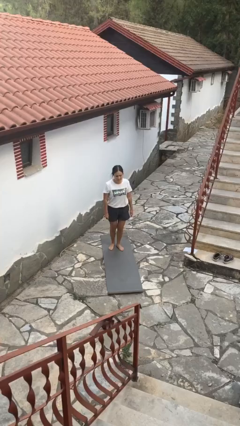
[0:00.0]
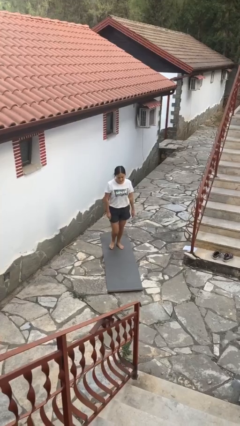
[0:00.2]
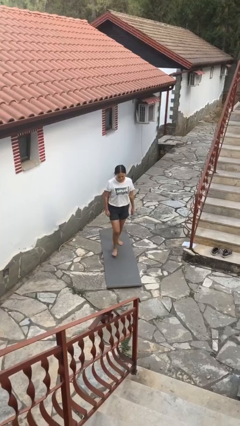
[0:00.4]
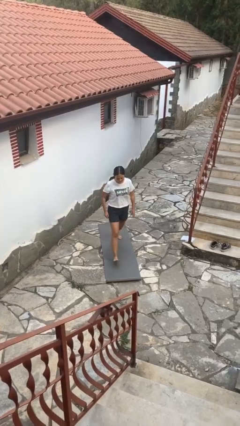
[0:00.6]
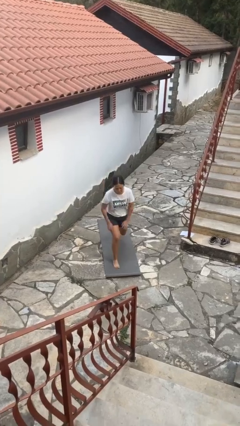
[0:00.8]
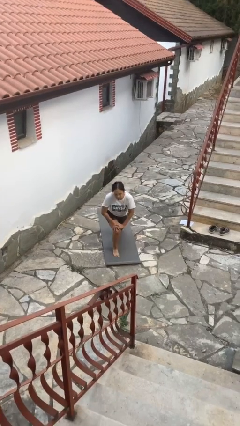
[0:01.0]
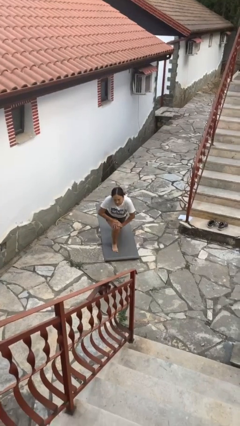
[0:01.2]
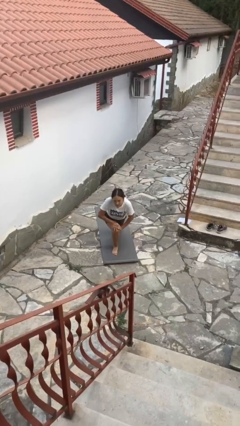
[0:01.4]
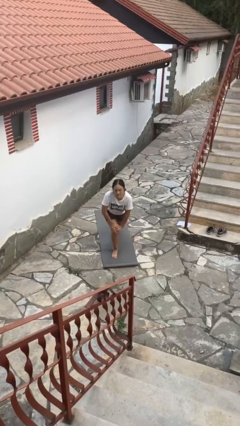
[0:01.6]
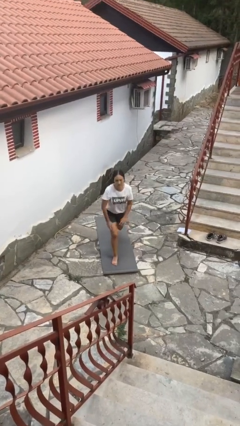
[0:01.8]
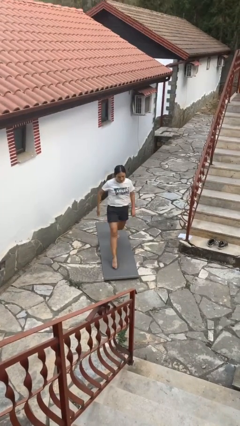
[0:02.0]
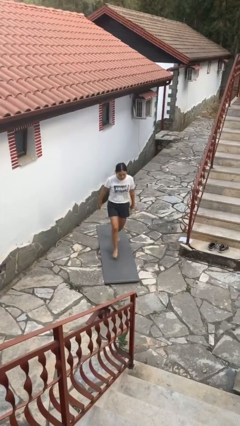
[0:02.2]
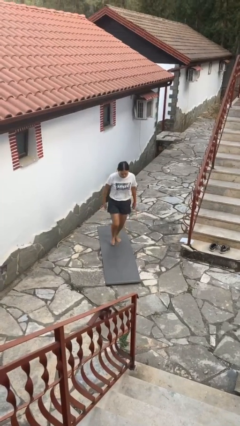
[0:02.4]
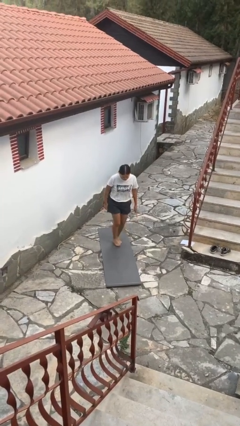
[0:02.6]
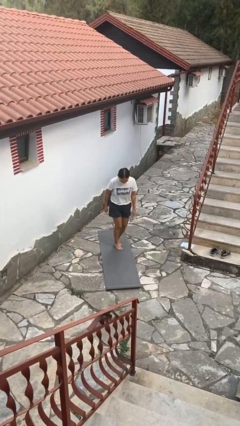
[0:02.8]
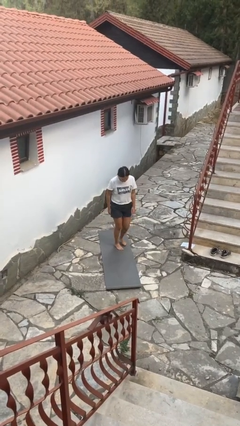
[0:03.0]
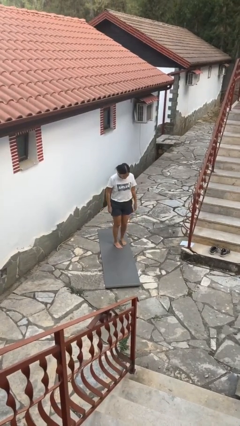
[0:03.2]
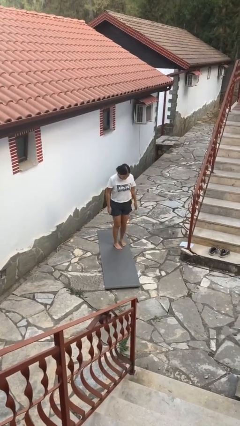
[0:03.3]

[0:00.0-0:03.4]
person exercises with lunges

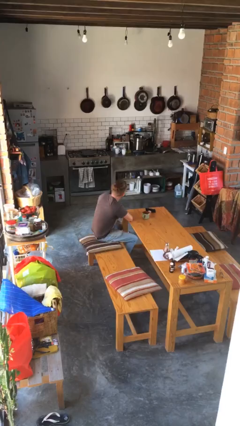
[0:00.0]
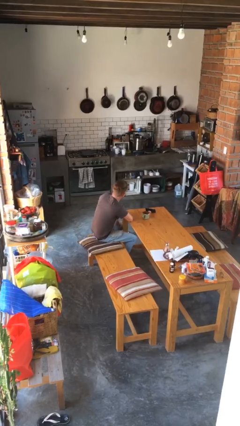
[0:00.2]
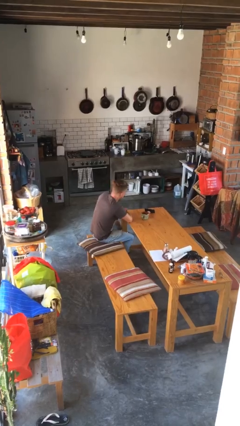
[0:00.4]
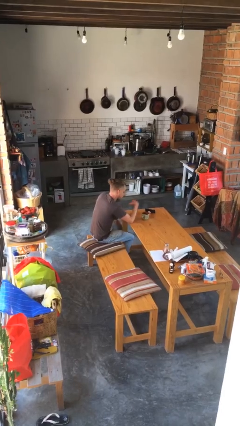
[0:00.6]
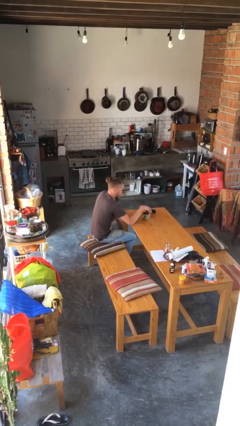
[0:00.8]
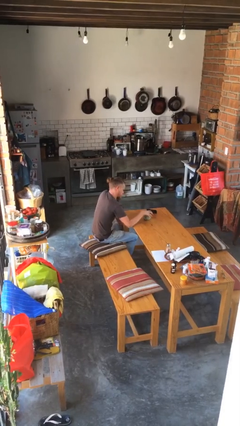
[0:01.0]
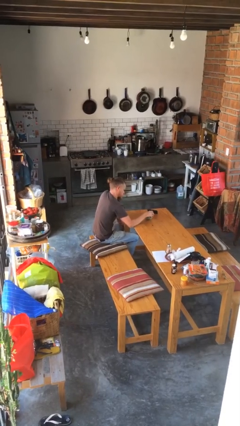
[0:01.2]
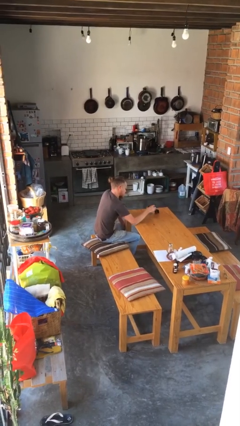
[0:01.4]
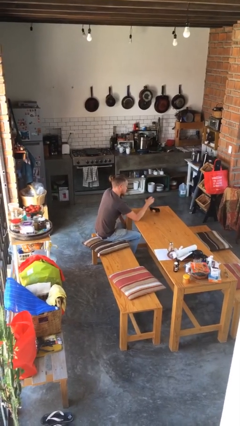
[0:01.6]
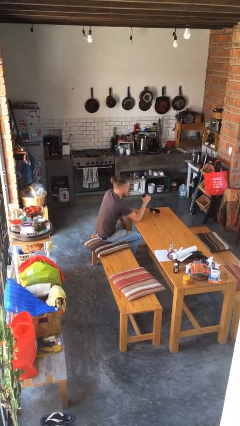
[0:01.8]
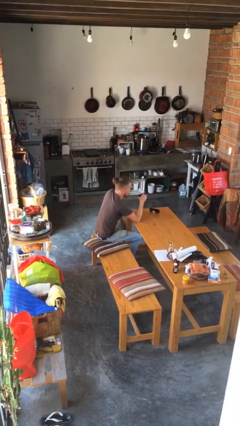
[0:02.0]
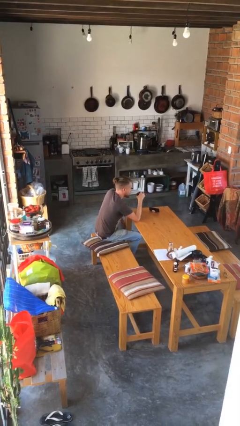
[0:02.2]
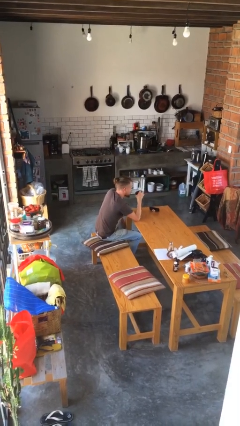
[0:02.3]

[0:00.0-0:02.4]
person picks up object from table

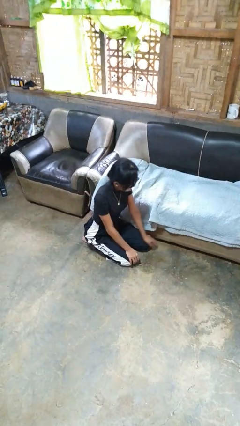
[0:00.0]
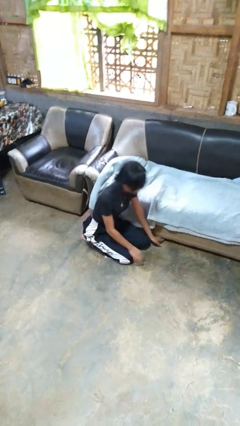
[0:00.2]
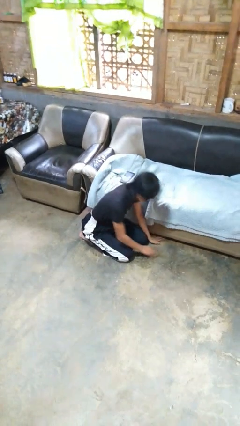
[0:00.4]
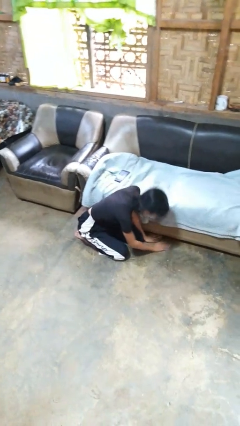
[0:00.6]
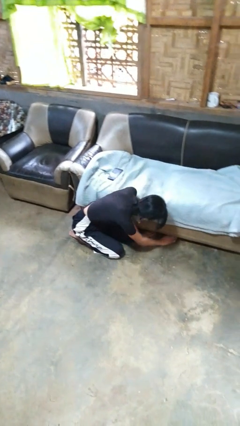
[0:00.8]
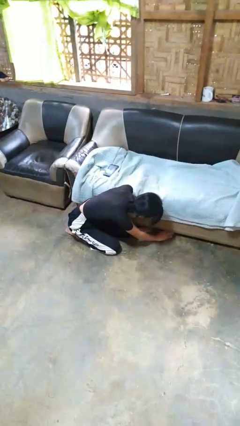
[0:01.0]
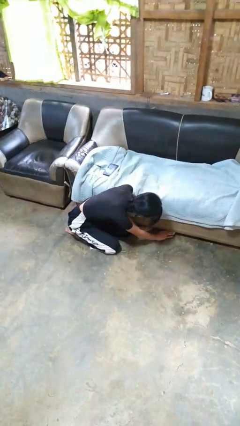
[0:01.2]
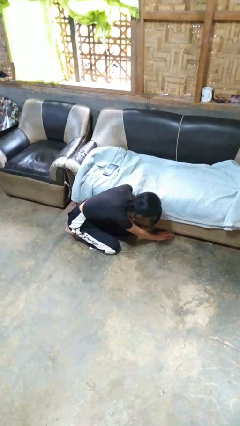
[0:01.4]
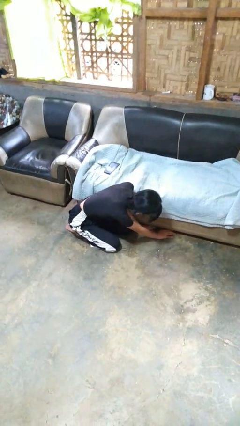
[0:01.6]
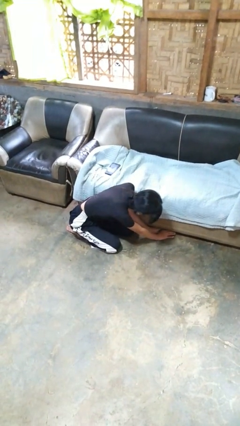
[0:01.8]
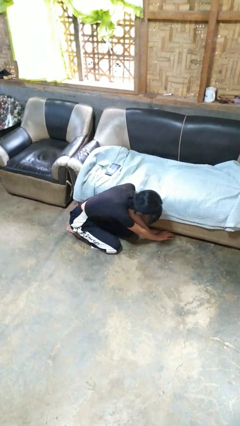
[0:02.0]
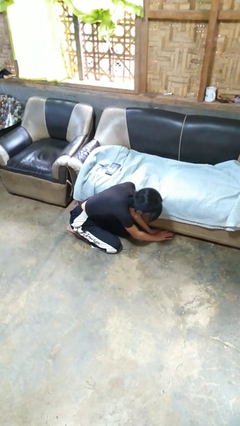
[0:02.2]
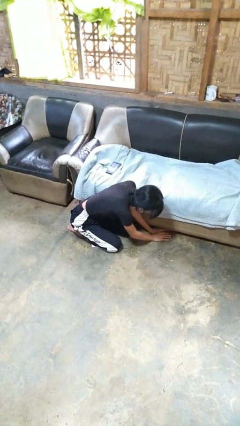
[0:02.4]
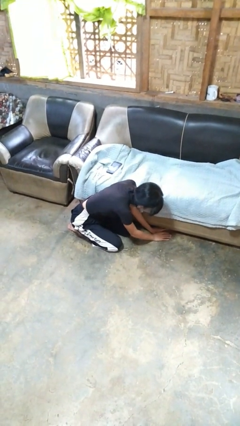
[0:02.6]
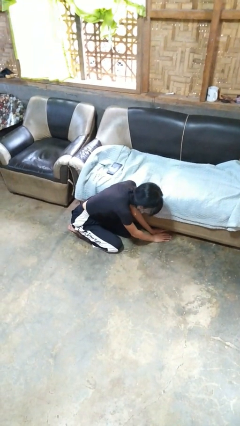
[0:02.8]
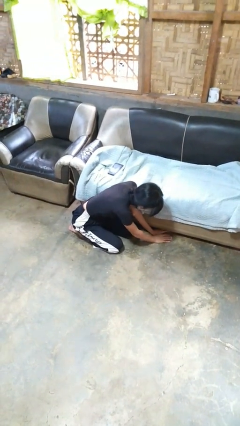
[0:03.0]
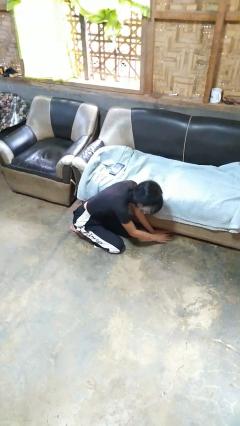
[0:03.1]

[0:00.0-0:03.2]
person searches under couch

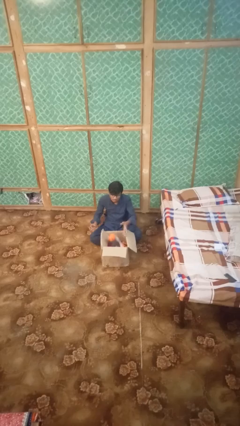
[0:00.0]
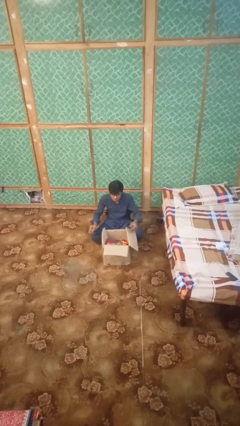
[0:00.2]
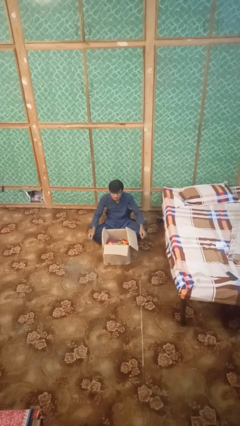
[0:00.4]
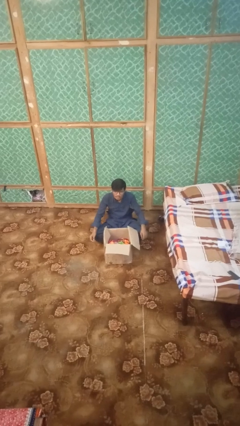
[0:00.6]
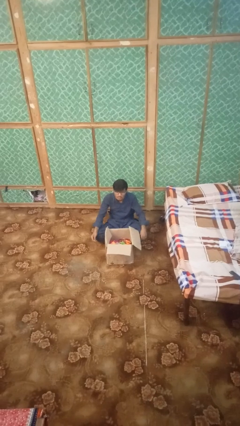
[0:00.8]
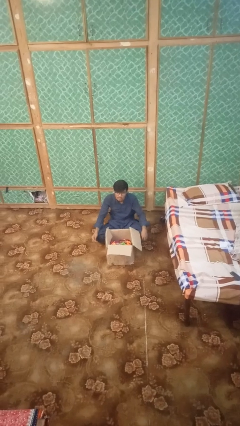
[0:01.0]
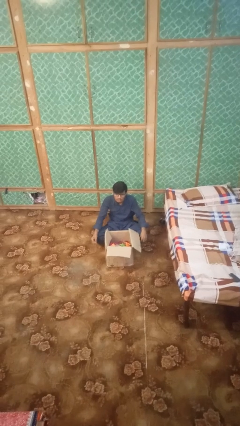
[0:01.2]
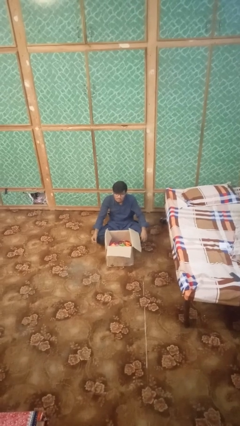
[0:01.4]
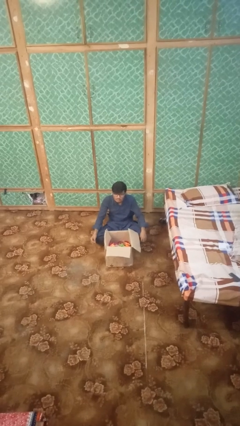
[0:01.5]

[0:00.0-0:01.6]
person puts object into box

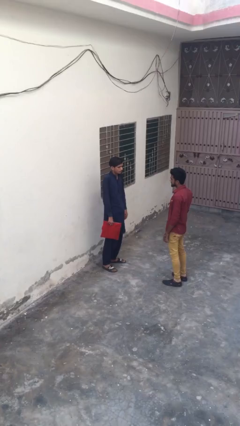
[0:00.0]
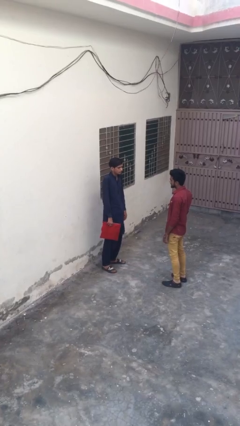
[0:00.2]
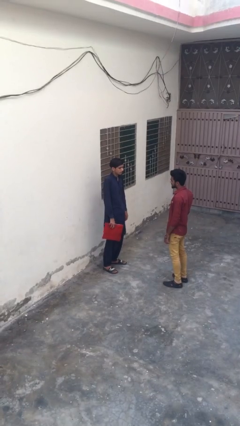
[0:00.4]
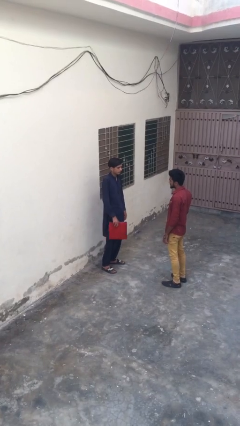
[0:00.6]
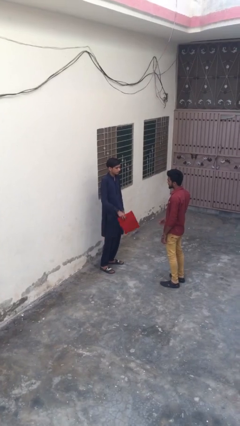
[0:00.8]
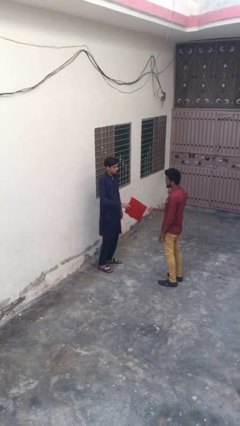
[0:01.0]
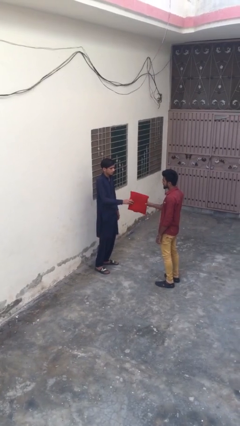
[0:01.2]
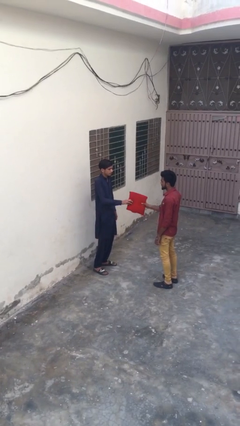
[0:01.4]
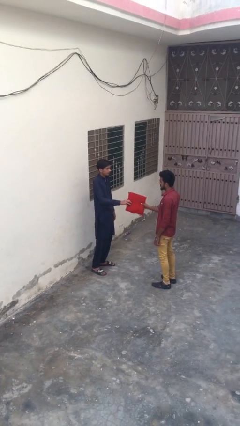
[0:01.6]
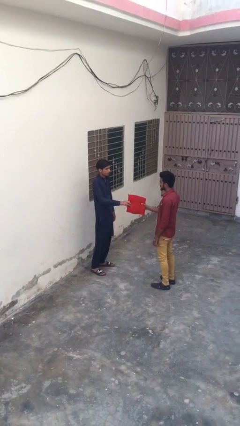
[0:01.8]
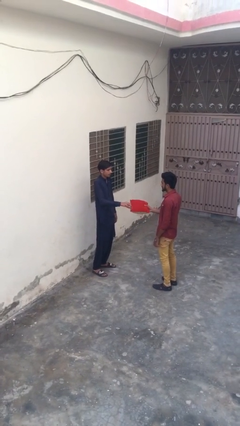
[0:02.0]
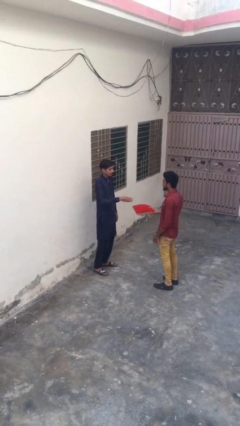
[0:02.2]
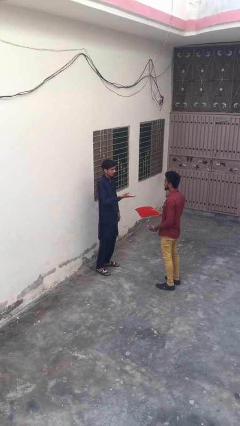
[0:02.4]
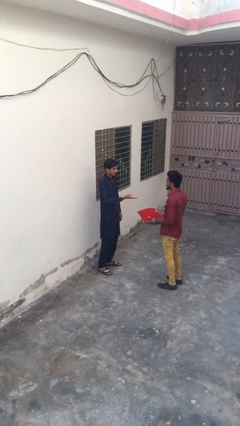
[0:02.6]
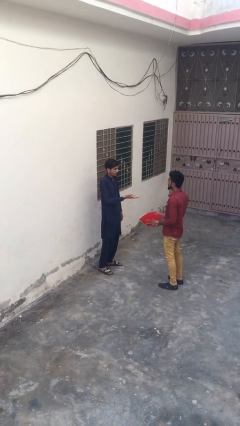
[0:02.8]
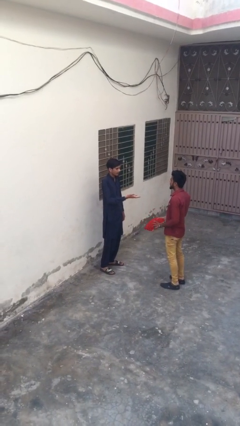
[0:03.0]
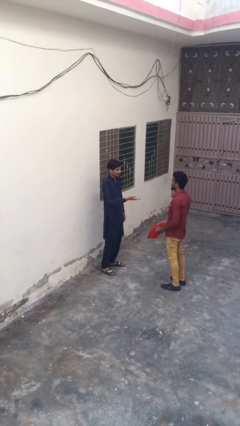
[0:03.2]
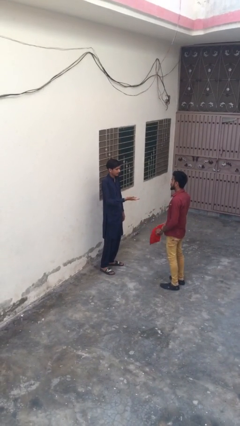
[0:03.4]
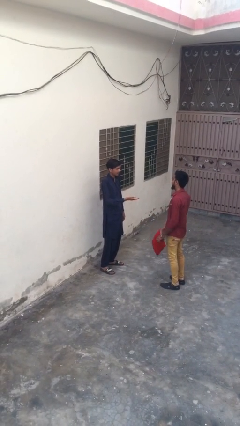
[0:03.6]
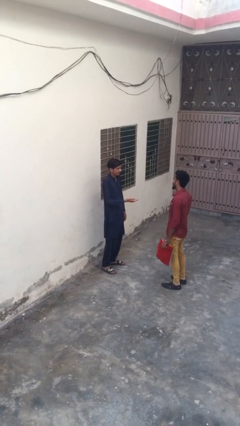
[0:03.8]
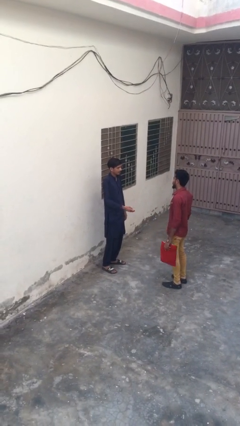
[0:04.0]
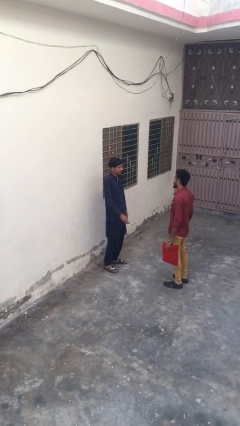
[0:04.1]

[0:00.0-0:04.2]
person transfers object to person

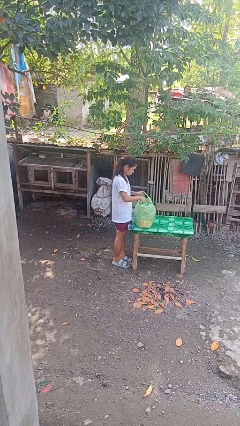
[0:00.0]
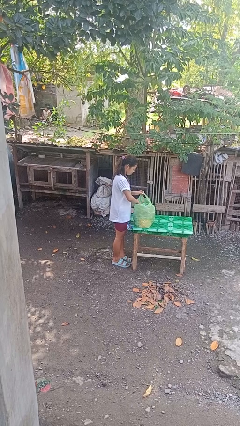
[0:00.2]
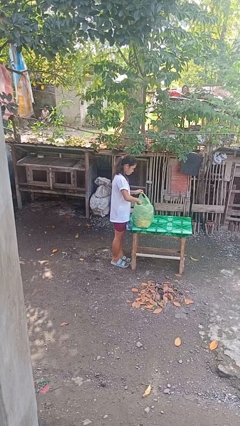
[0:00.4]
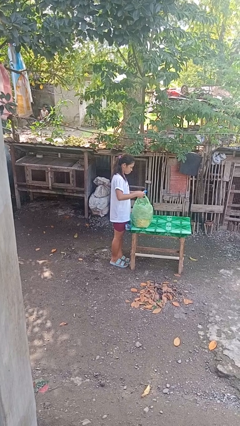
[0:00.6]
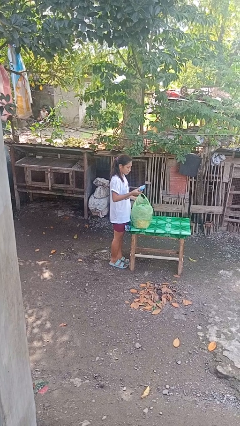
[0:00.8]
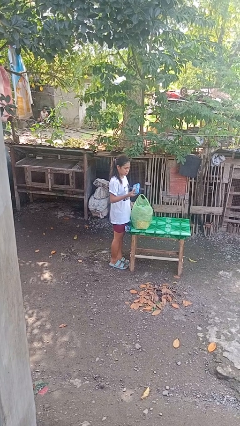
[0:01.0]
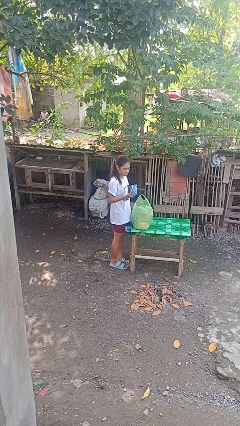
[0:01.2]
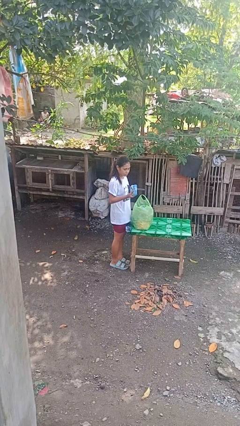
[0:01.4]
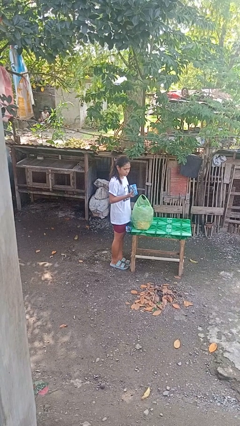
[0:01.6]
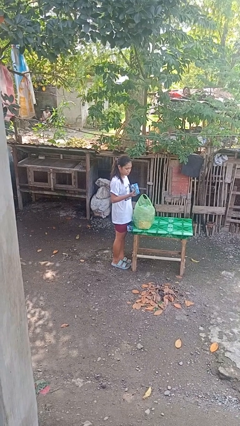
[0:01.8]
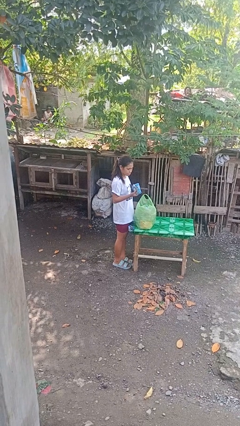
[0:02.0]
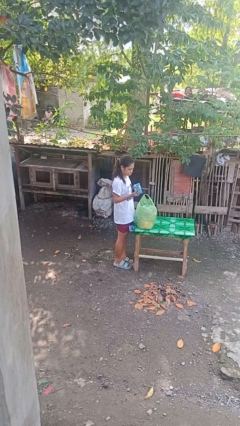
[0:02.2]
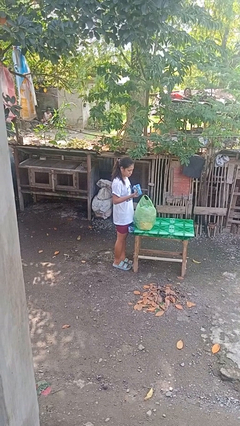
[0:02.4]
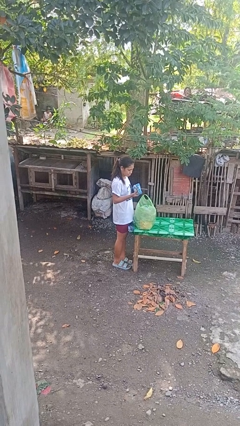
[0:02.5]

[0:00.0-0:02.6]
person takes object from bag
